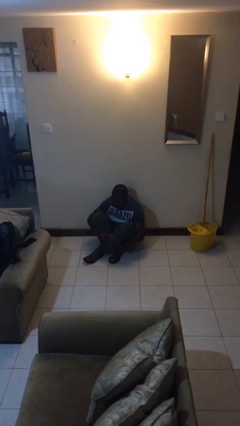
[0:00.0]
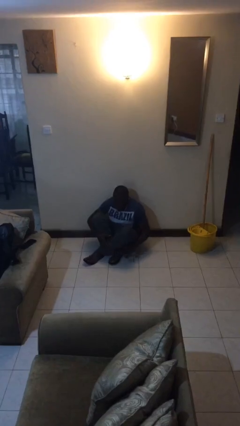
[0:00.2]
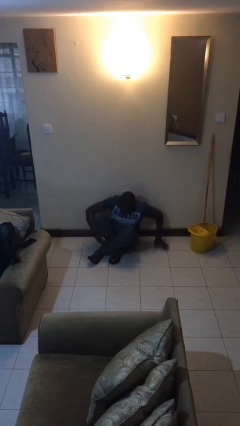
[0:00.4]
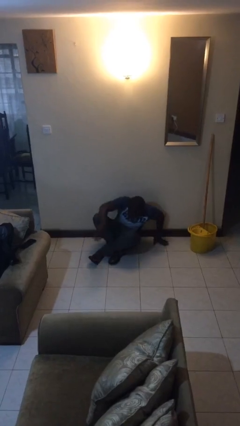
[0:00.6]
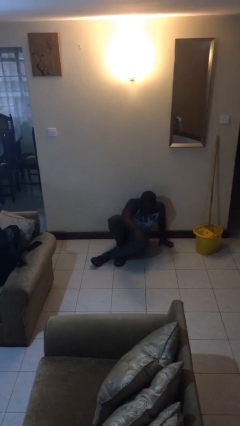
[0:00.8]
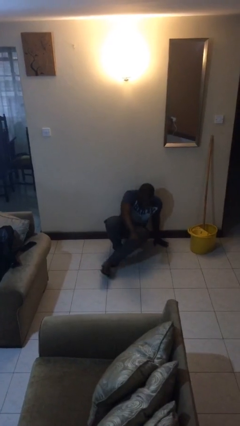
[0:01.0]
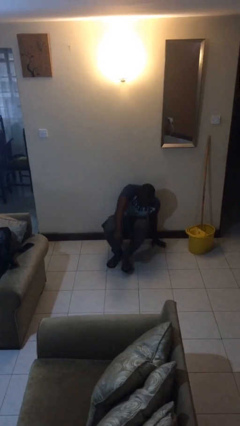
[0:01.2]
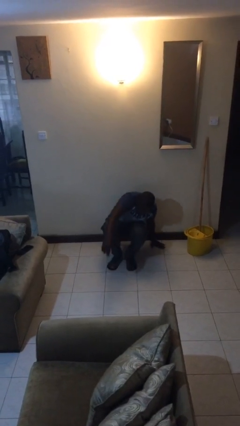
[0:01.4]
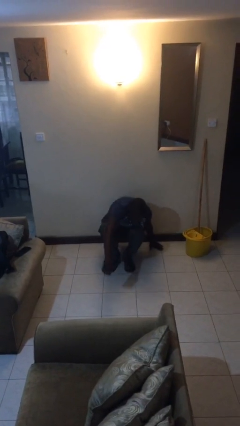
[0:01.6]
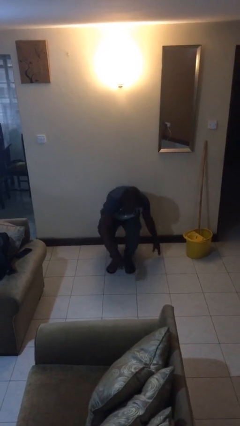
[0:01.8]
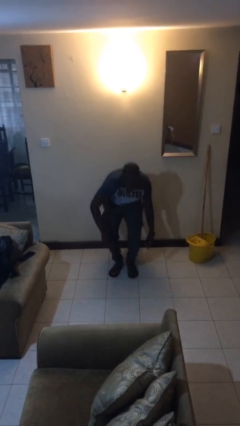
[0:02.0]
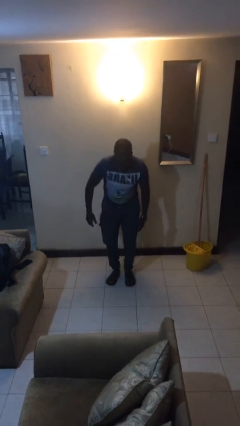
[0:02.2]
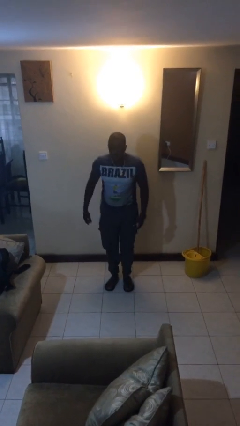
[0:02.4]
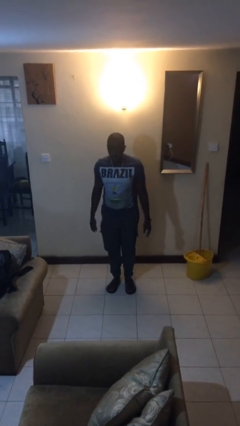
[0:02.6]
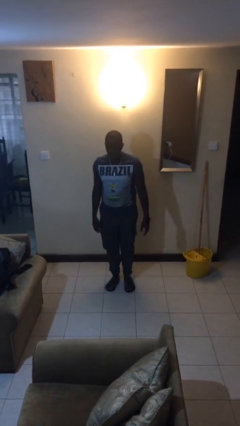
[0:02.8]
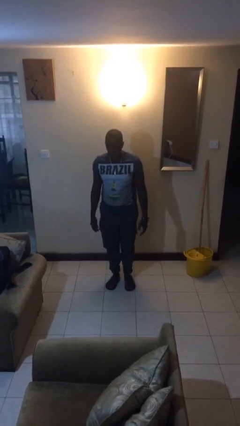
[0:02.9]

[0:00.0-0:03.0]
person stands up from floor

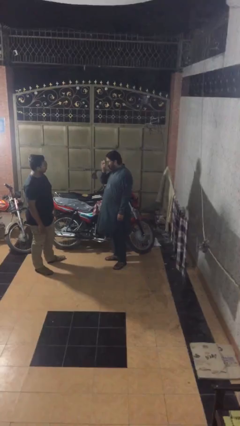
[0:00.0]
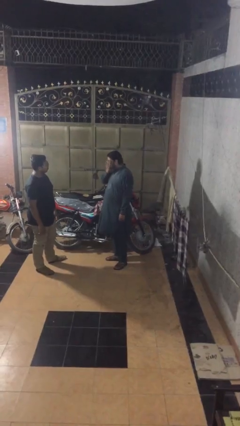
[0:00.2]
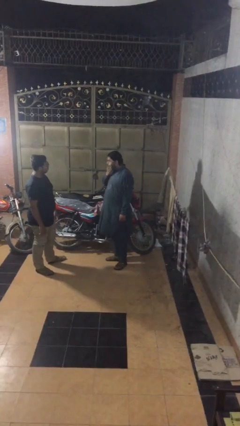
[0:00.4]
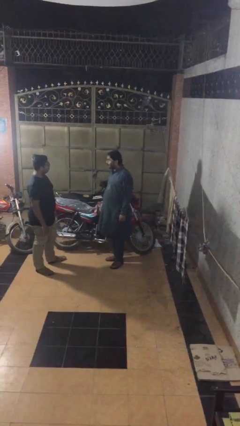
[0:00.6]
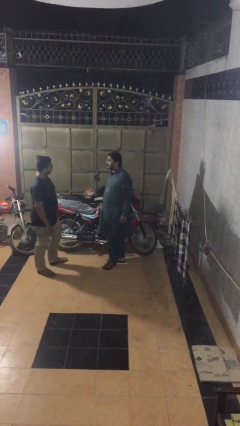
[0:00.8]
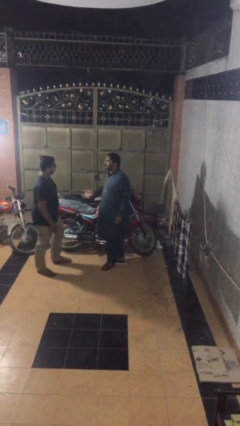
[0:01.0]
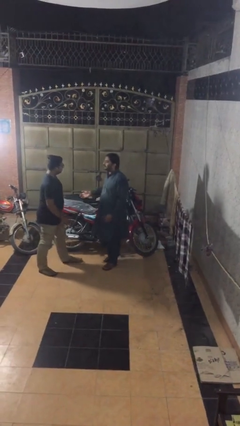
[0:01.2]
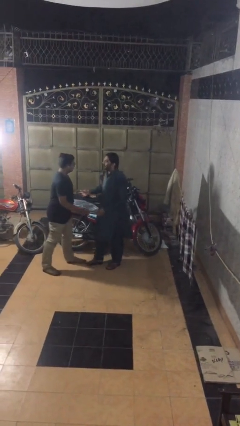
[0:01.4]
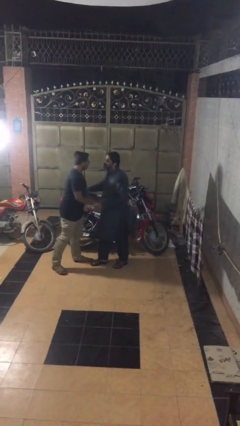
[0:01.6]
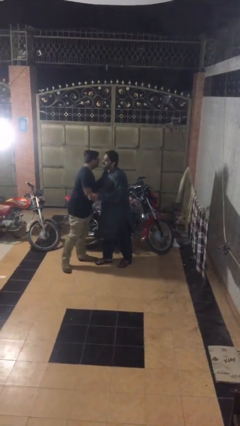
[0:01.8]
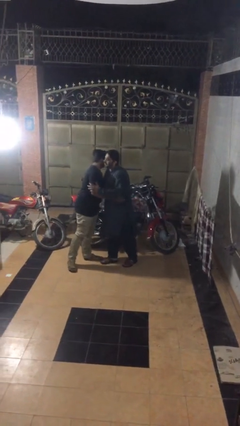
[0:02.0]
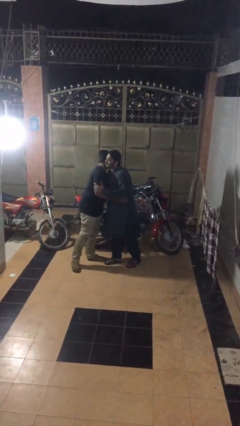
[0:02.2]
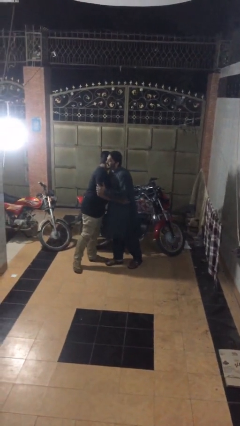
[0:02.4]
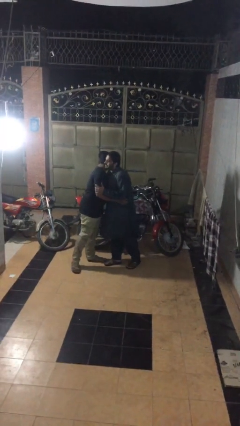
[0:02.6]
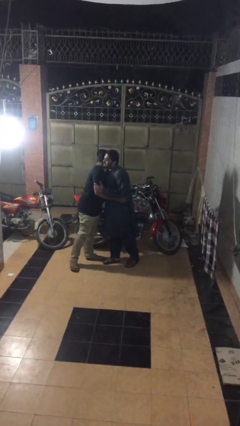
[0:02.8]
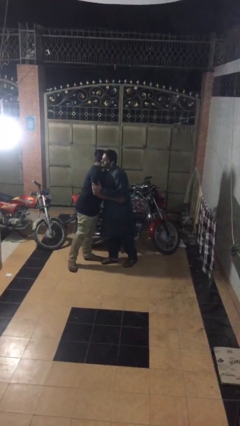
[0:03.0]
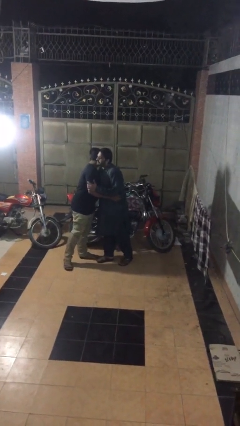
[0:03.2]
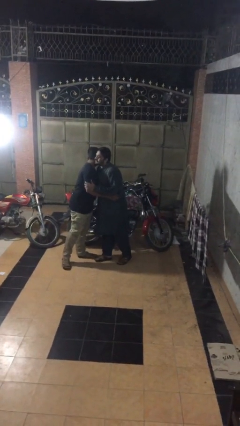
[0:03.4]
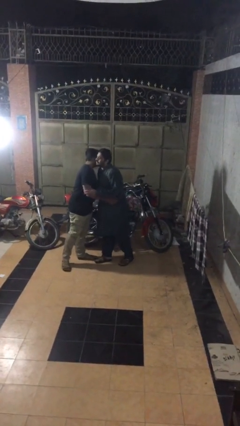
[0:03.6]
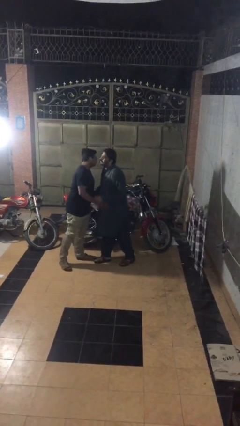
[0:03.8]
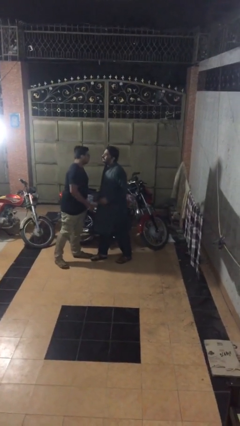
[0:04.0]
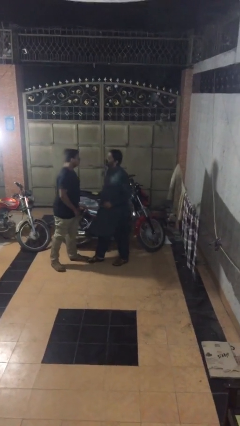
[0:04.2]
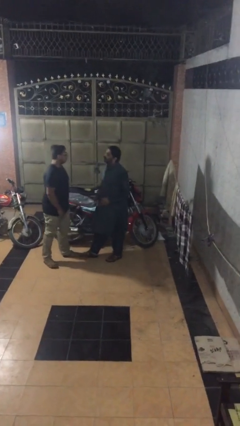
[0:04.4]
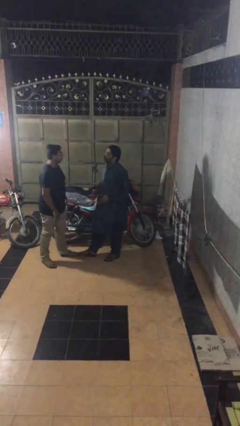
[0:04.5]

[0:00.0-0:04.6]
person embraces person

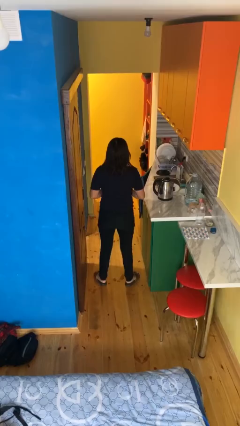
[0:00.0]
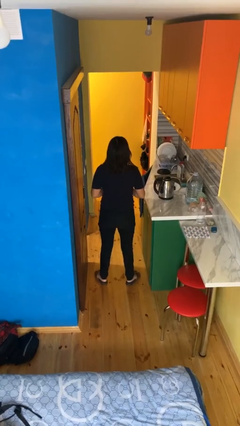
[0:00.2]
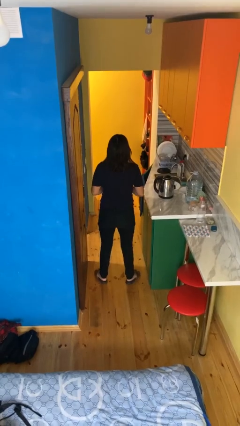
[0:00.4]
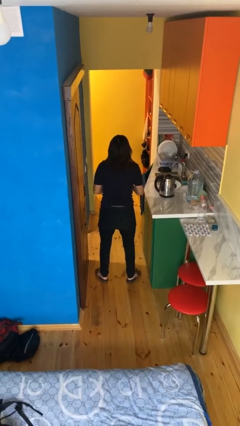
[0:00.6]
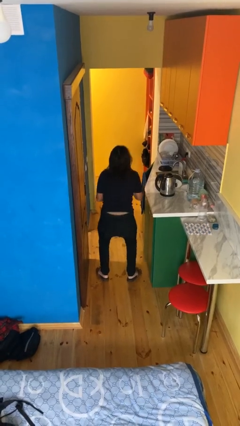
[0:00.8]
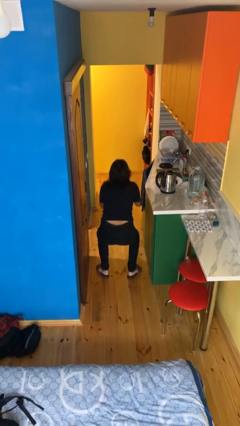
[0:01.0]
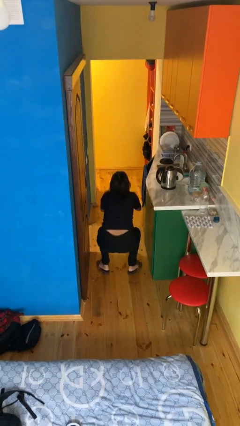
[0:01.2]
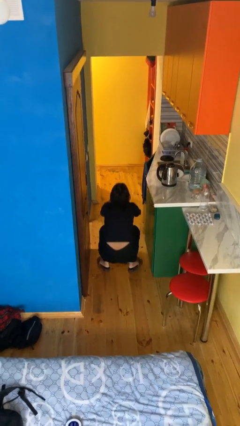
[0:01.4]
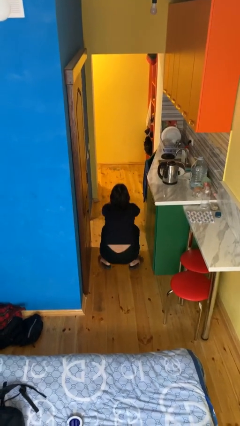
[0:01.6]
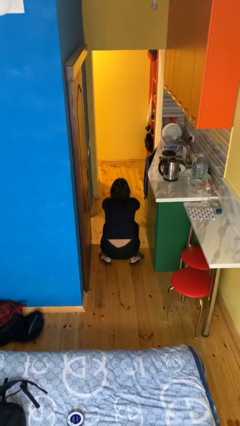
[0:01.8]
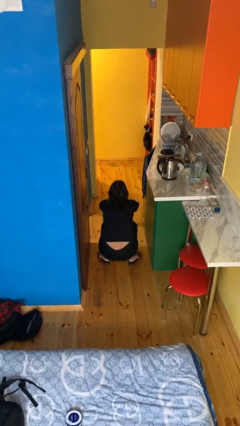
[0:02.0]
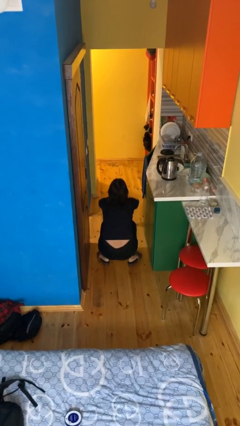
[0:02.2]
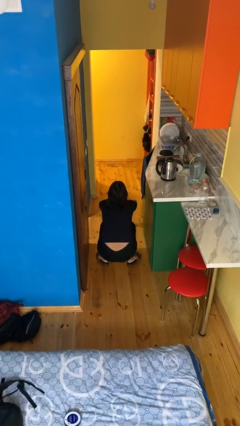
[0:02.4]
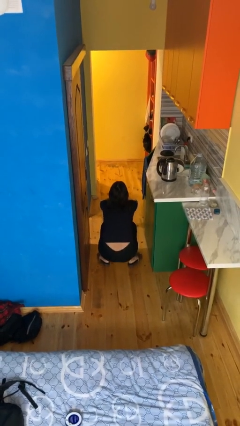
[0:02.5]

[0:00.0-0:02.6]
person squats

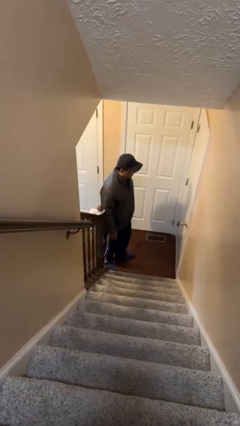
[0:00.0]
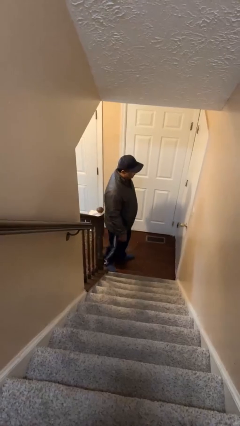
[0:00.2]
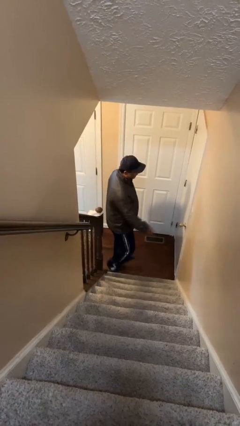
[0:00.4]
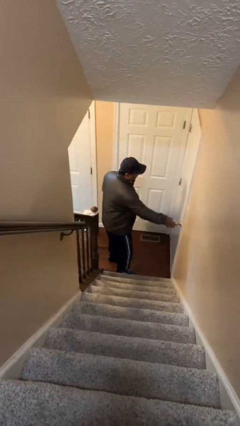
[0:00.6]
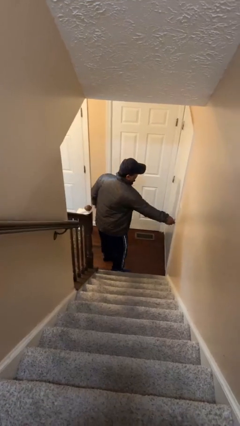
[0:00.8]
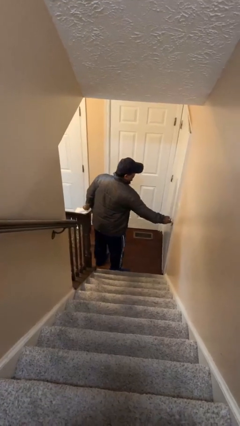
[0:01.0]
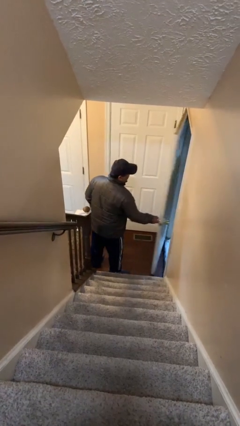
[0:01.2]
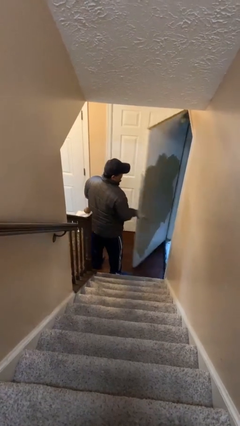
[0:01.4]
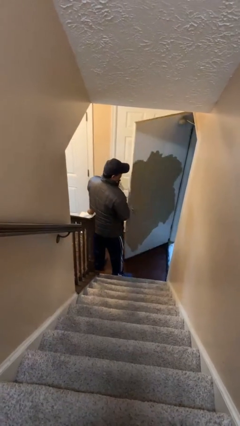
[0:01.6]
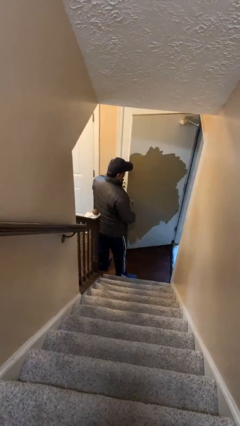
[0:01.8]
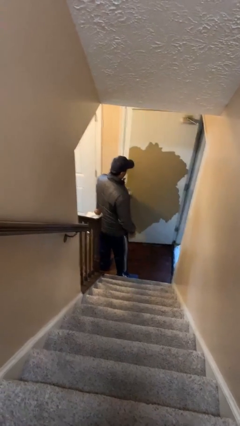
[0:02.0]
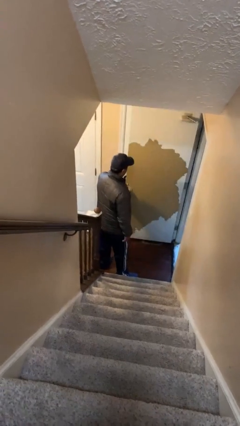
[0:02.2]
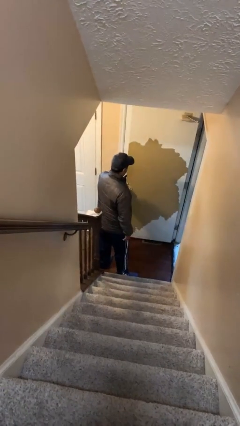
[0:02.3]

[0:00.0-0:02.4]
person opens facility door

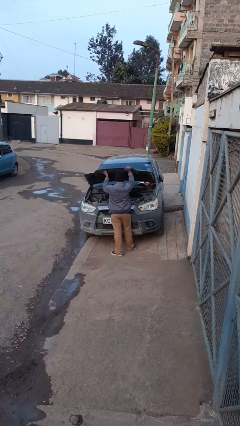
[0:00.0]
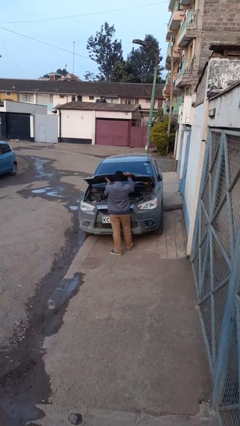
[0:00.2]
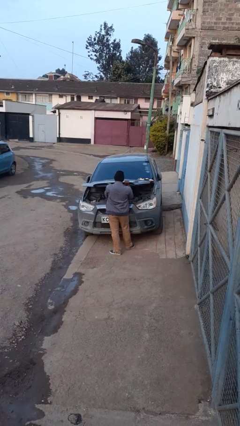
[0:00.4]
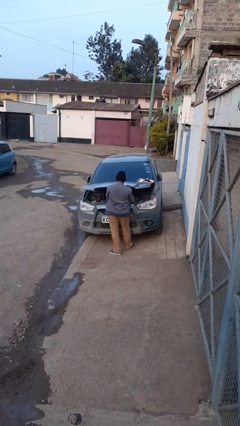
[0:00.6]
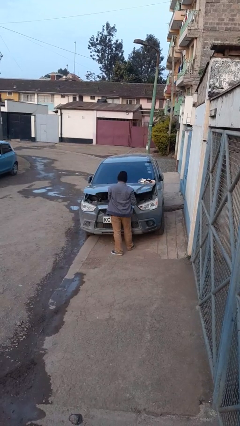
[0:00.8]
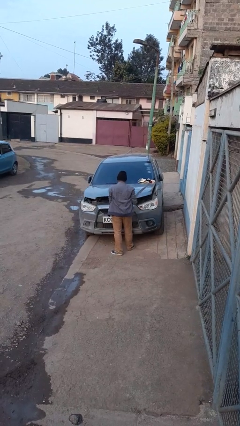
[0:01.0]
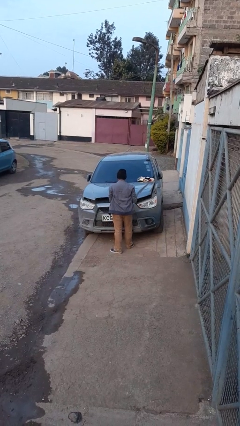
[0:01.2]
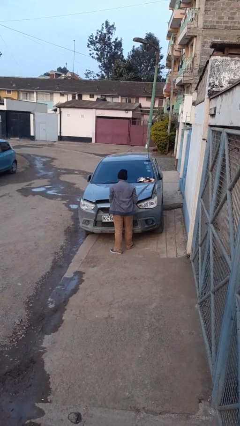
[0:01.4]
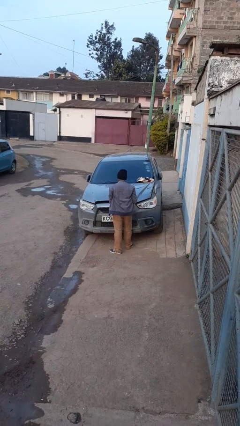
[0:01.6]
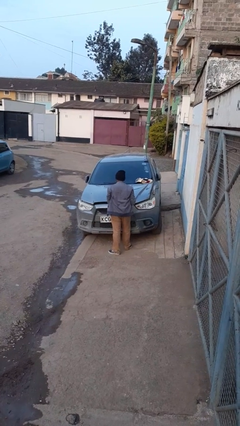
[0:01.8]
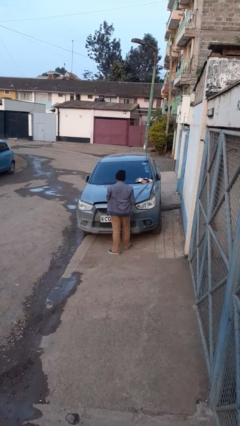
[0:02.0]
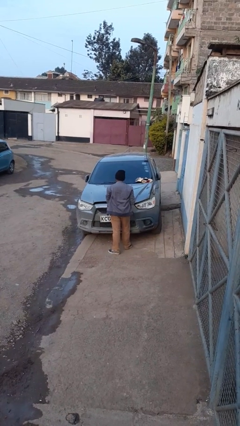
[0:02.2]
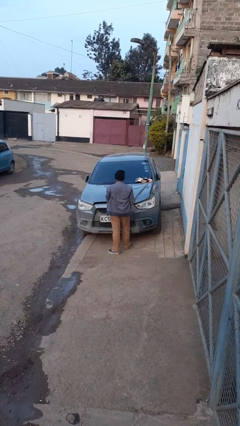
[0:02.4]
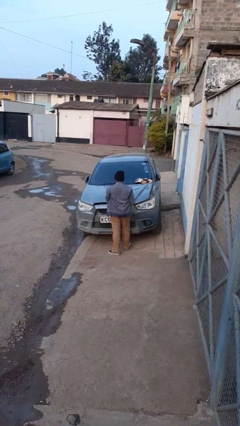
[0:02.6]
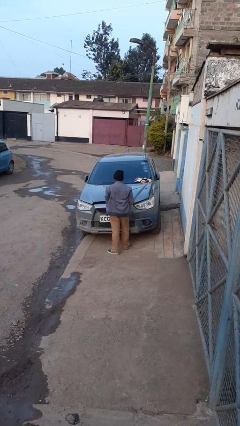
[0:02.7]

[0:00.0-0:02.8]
person closes car hood

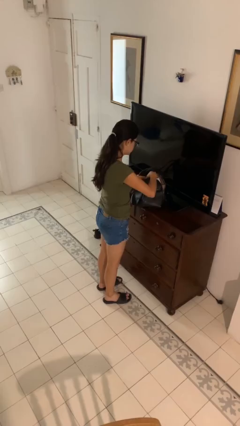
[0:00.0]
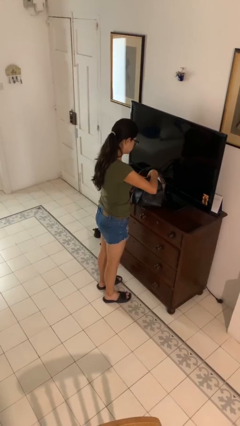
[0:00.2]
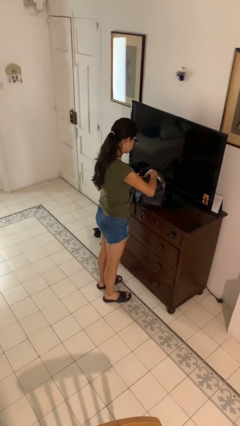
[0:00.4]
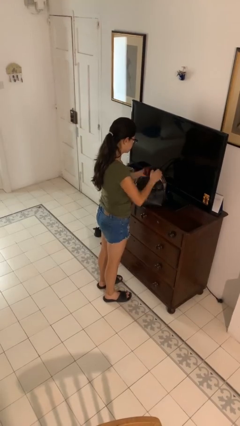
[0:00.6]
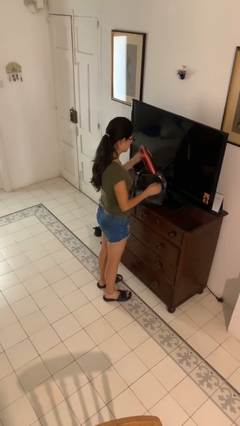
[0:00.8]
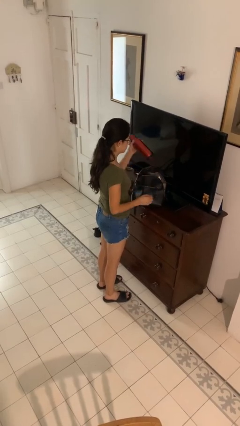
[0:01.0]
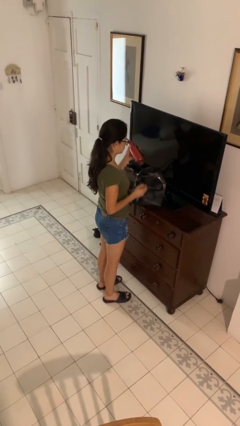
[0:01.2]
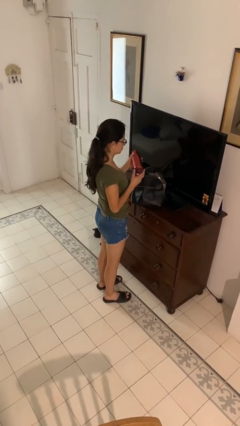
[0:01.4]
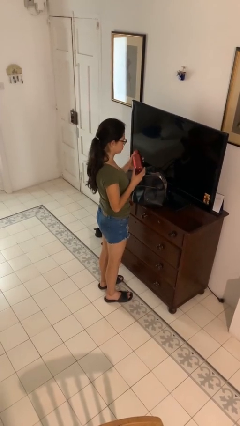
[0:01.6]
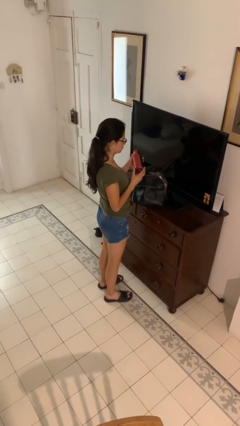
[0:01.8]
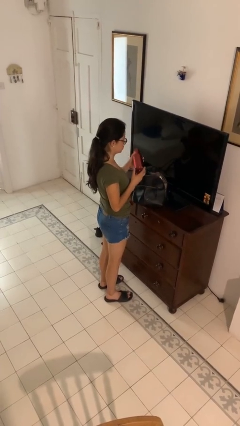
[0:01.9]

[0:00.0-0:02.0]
person takes object from purse
